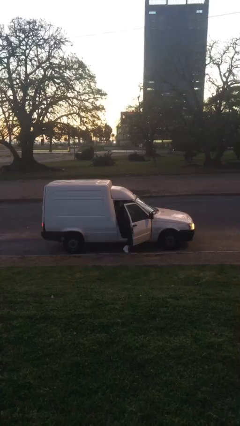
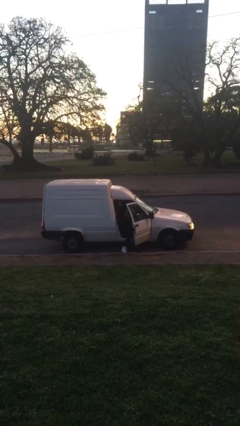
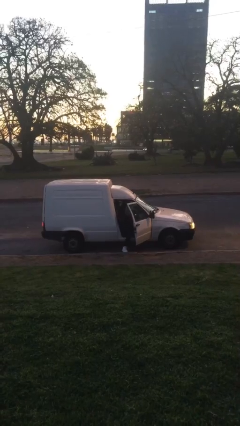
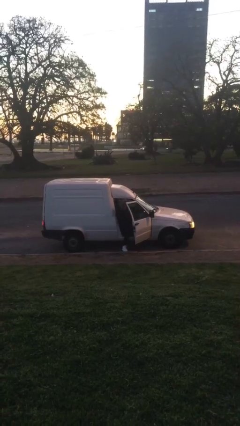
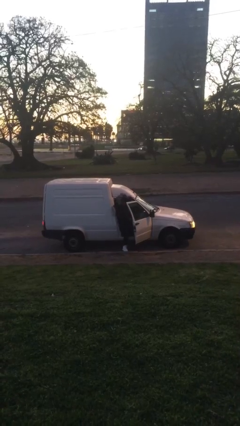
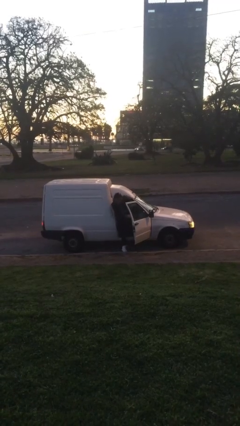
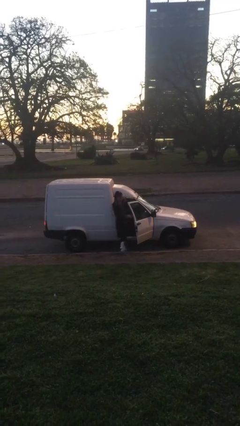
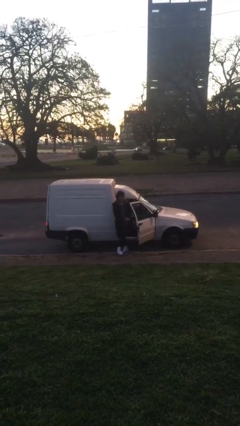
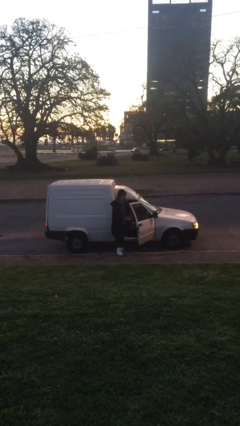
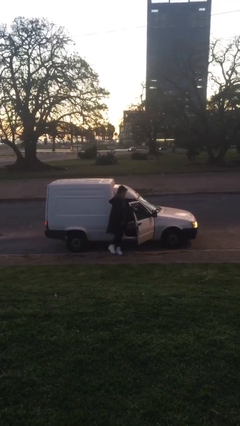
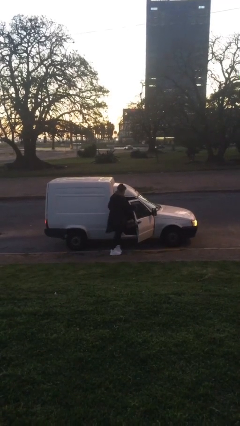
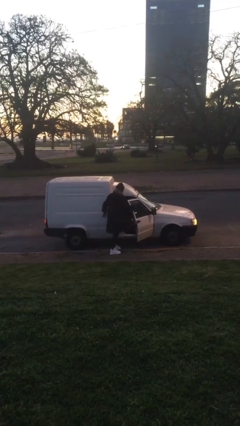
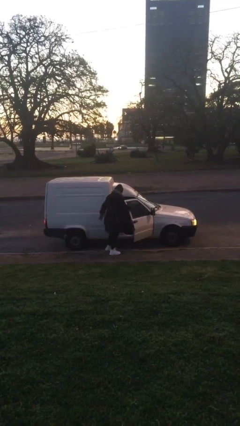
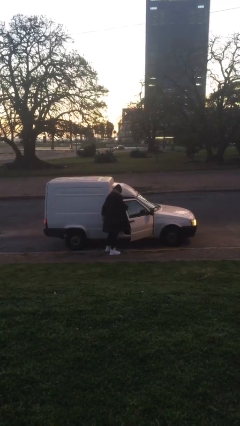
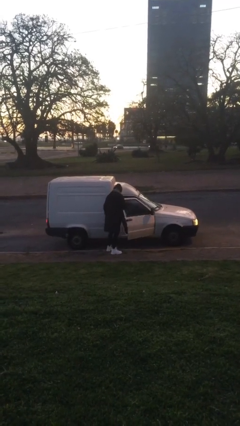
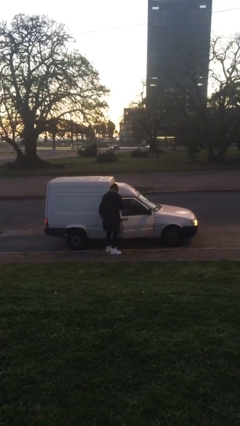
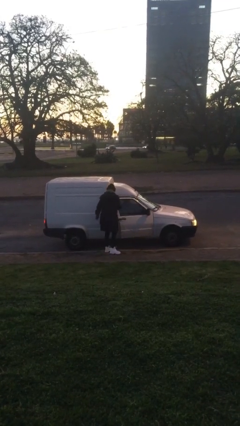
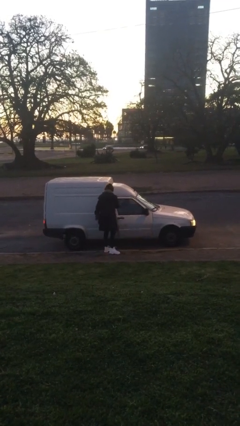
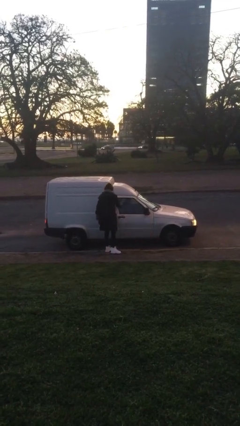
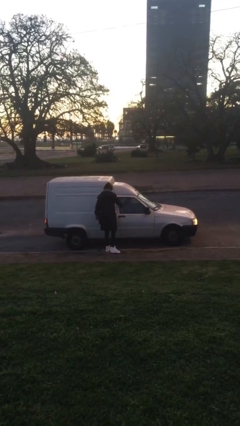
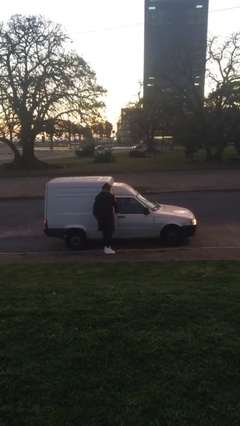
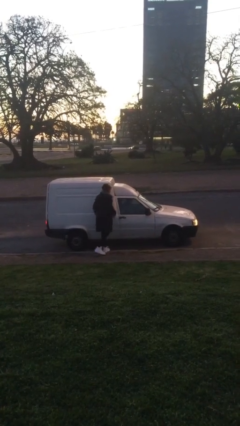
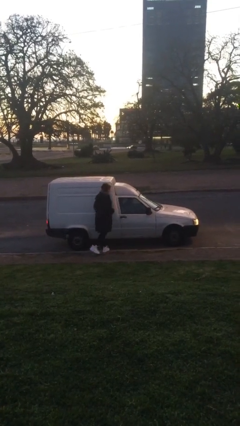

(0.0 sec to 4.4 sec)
car drops off person

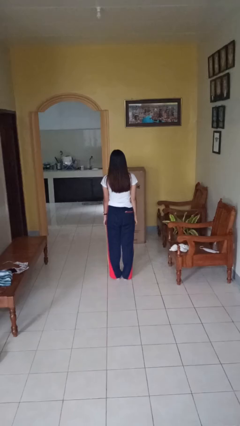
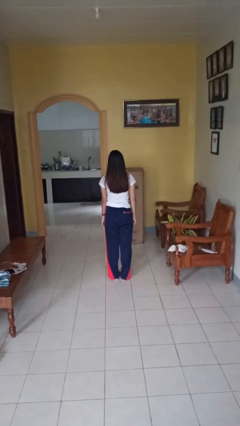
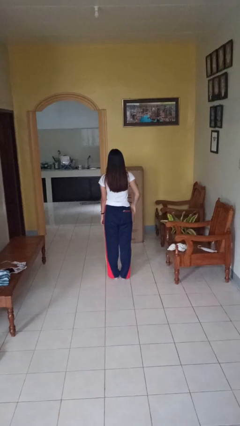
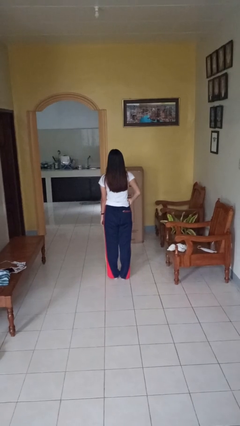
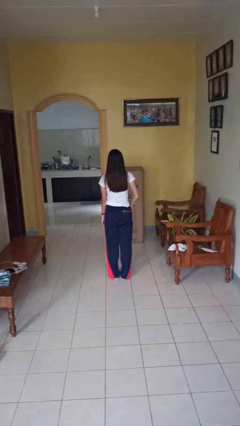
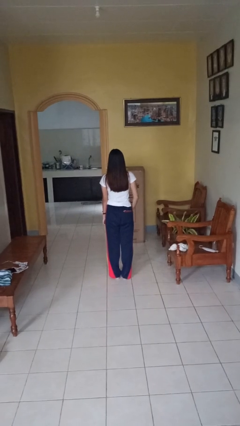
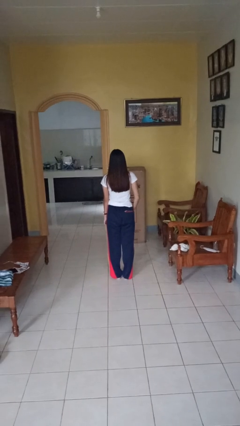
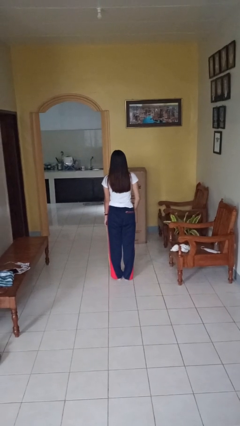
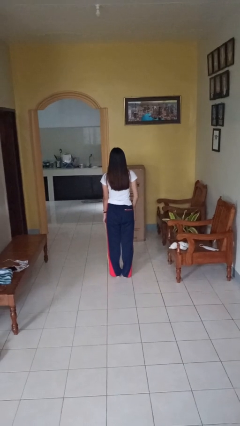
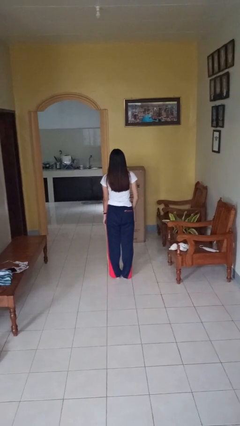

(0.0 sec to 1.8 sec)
person puts hands in back pockets

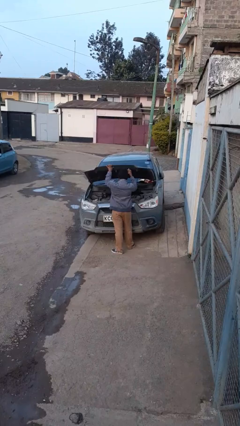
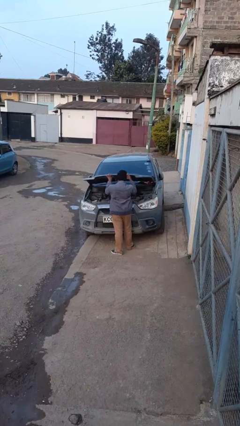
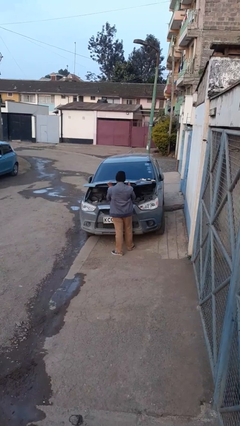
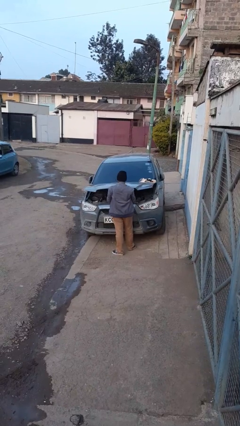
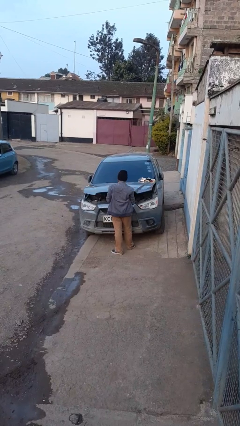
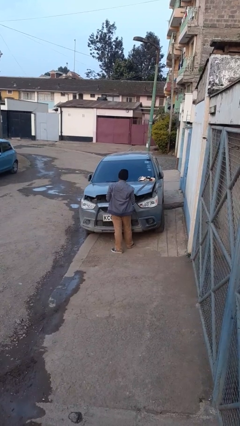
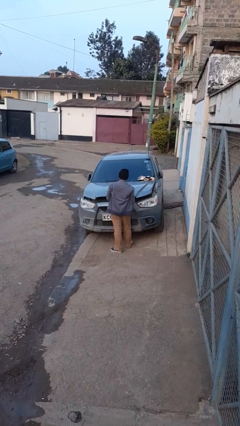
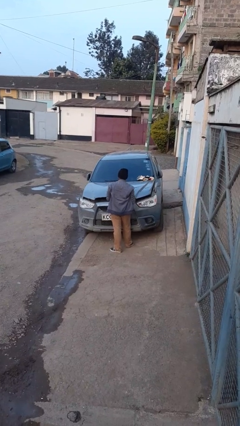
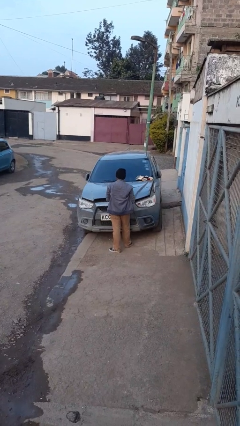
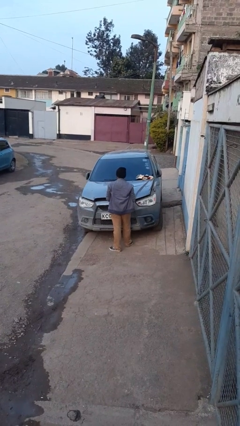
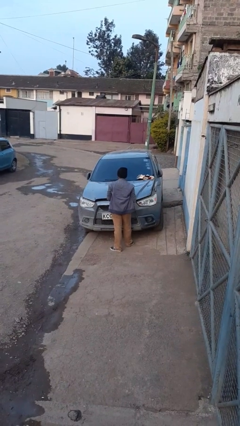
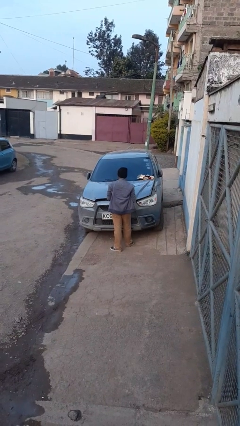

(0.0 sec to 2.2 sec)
person closes car hood

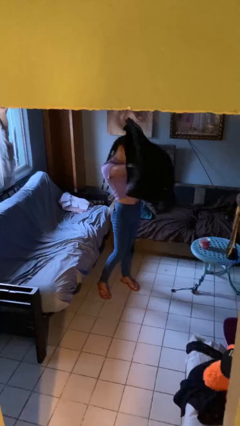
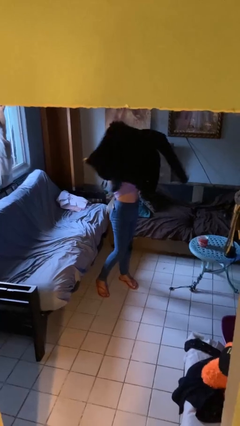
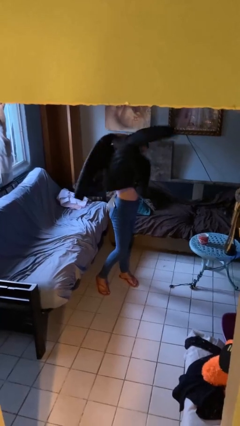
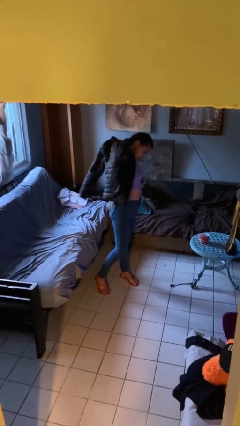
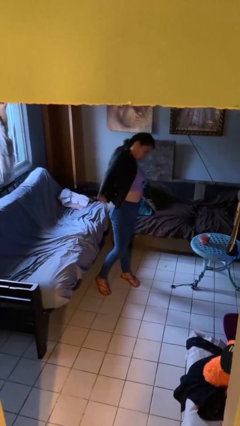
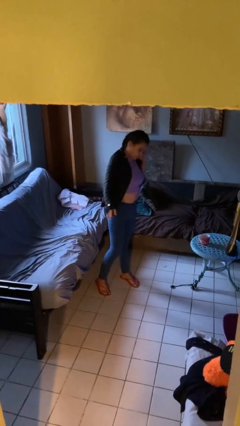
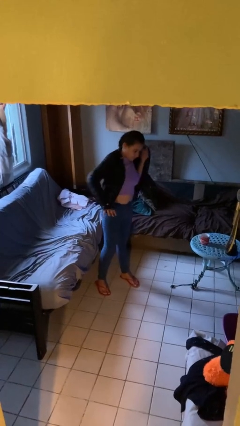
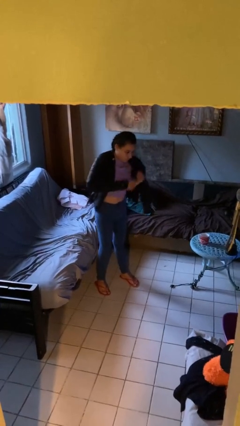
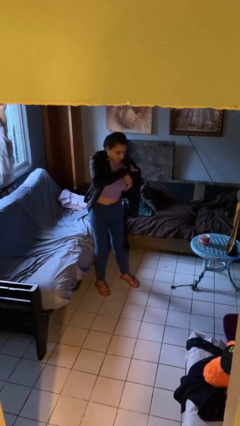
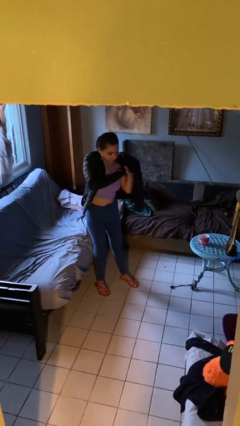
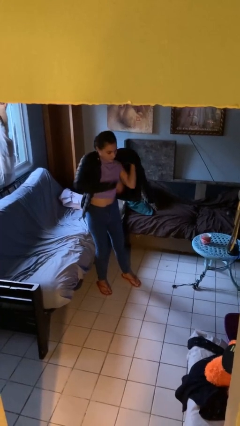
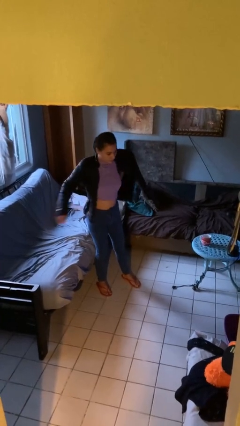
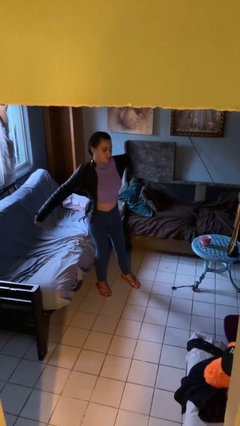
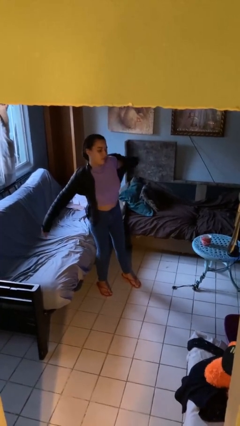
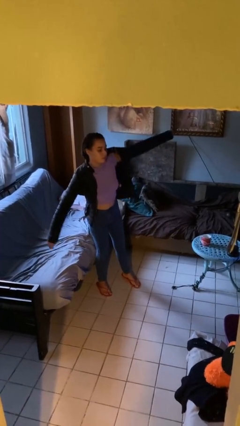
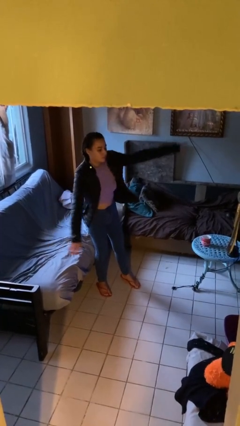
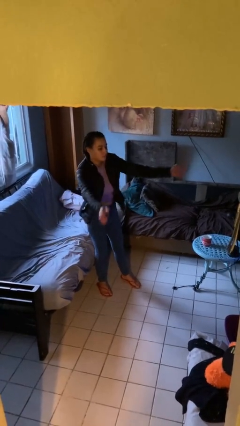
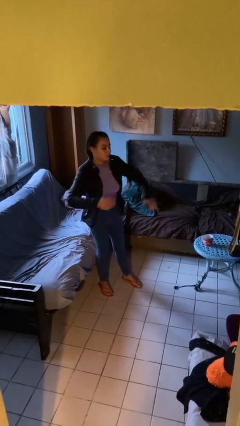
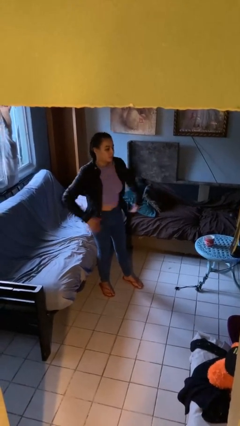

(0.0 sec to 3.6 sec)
person puts on jacket

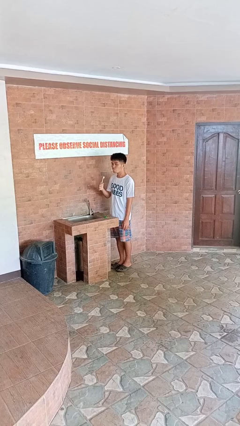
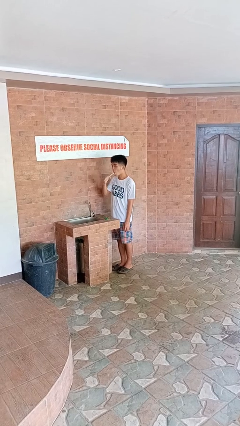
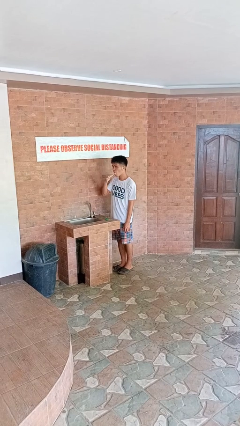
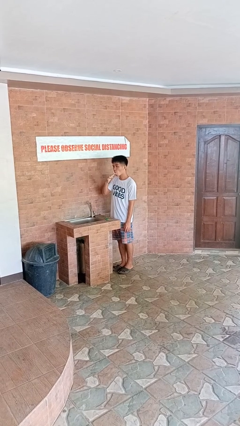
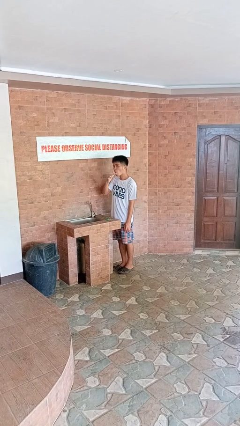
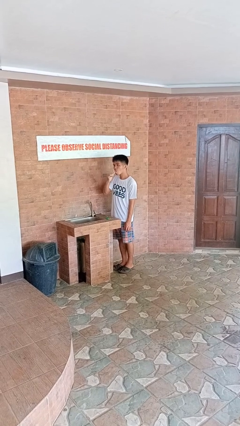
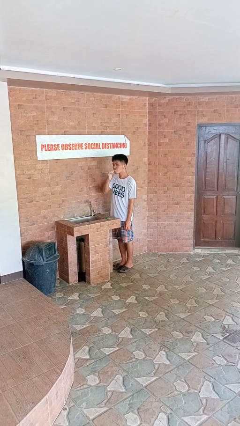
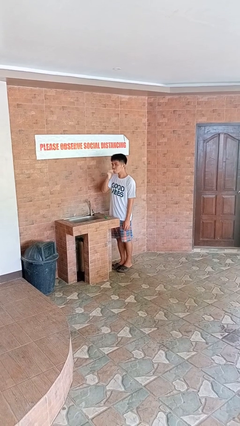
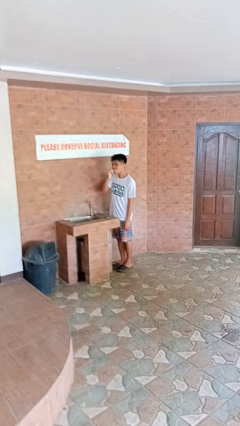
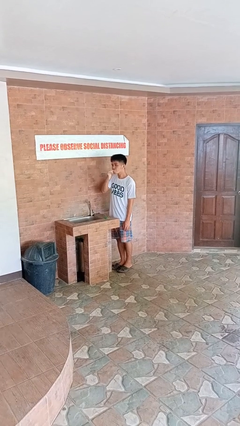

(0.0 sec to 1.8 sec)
person brushes teeth

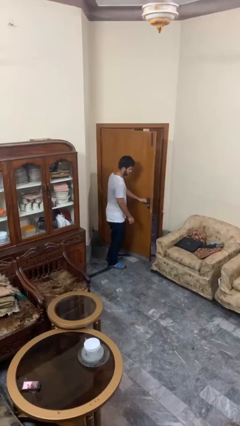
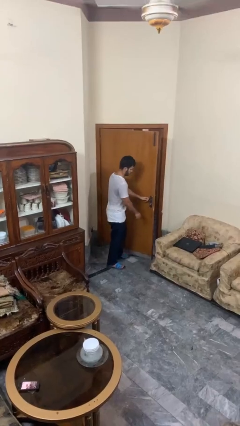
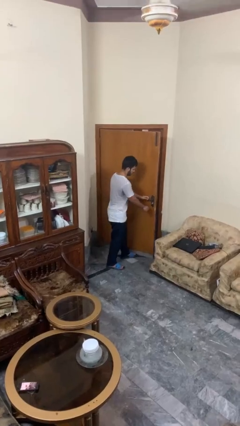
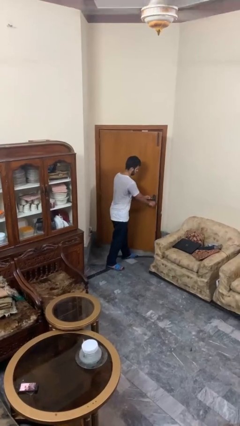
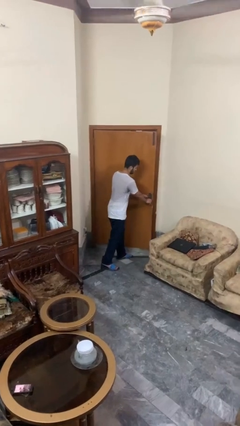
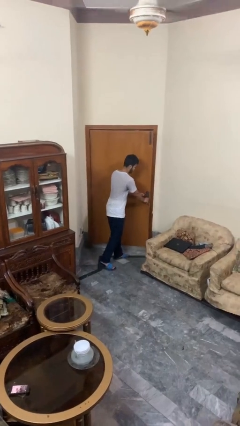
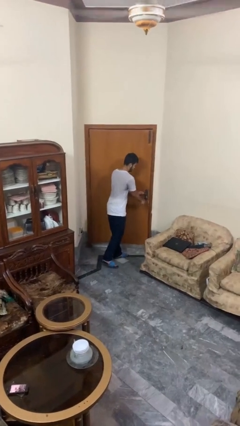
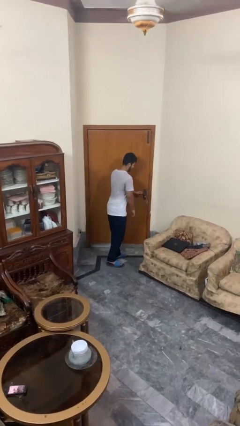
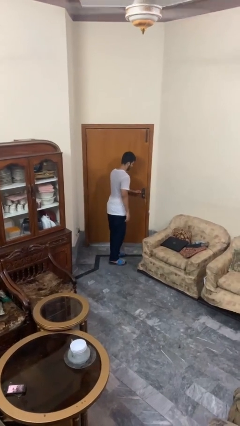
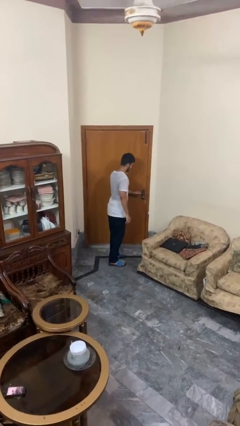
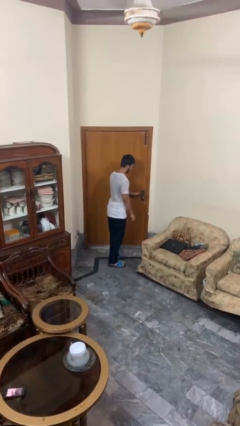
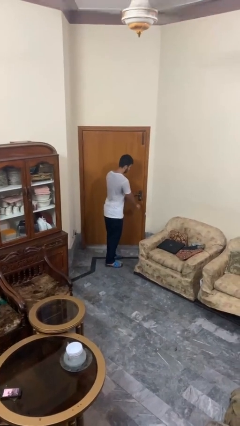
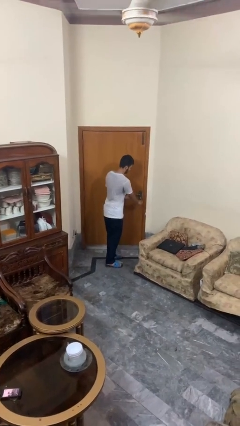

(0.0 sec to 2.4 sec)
person closes facility door

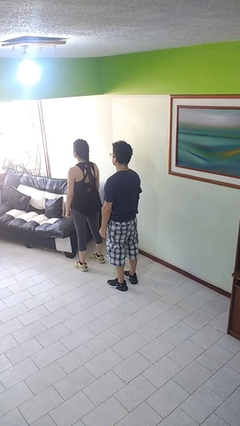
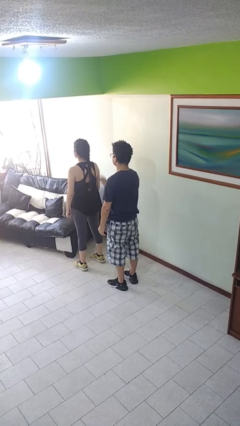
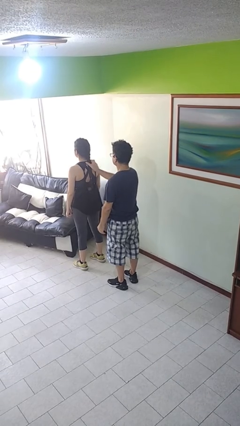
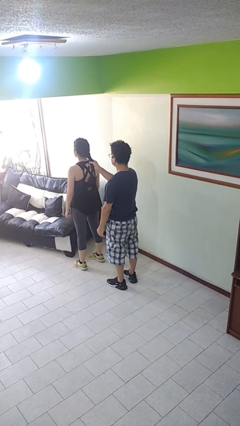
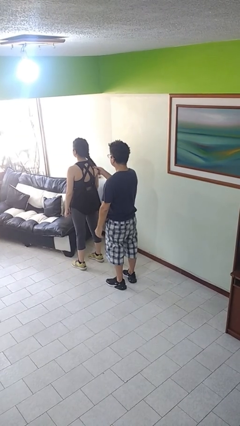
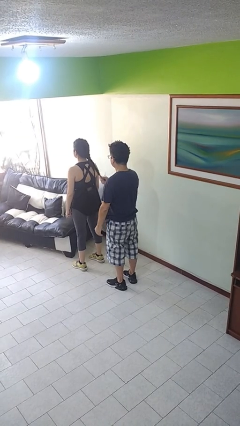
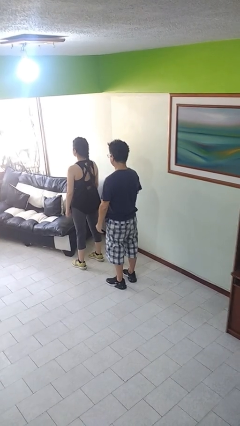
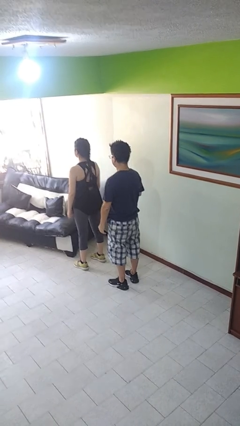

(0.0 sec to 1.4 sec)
person grabs person by hair
